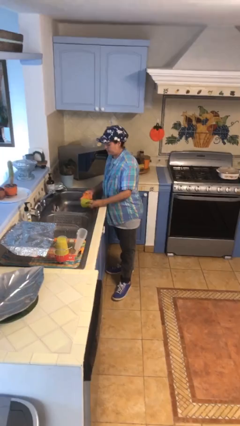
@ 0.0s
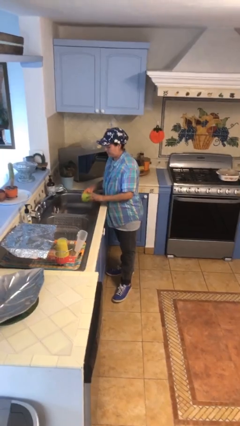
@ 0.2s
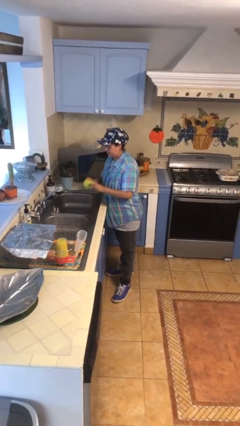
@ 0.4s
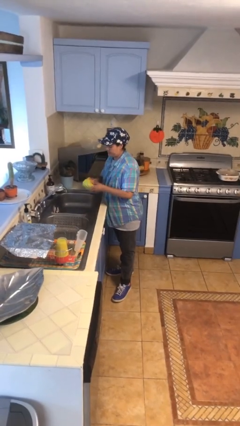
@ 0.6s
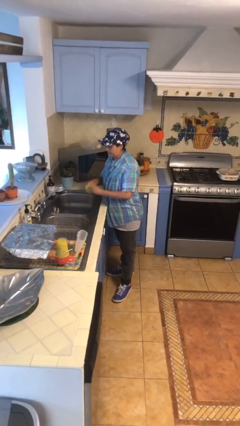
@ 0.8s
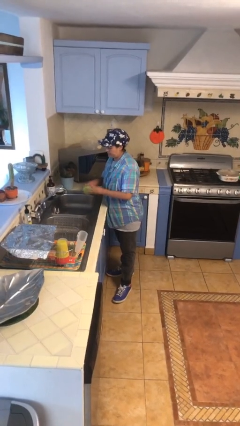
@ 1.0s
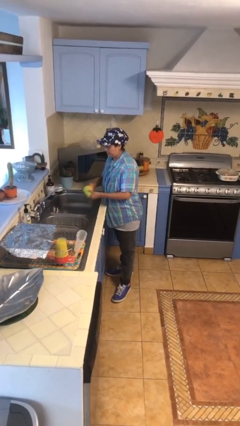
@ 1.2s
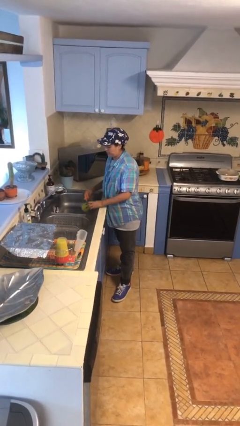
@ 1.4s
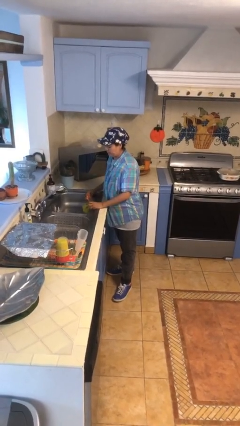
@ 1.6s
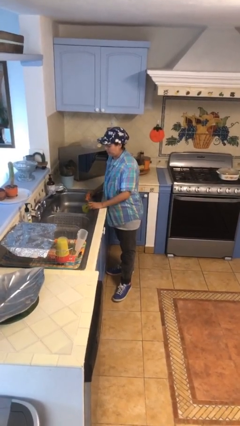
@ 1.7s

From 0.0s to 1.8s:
person washes dish

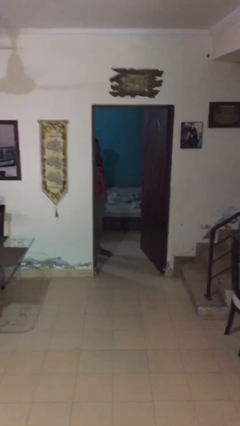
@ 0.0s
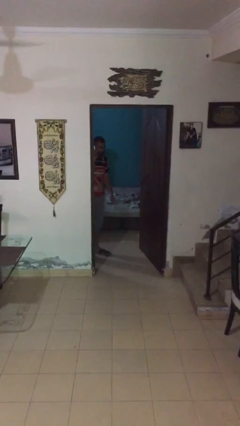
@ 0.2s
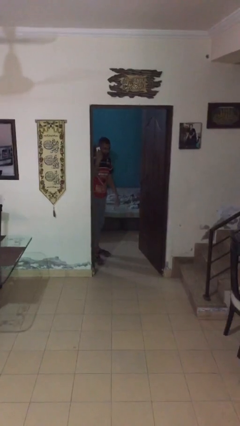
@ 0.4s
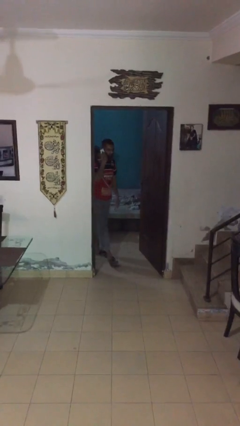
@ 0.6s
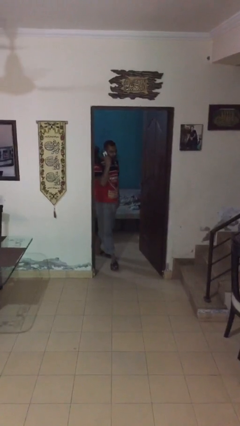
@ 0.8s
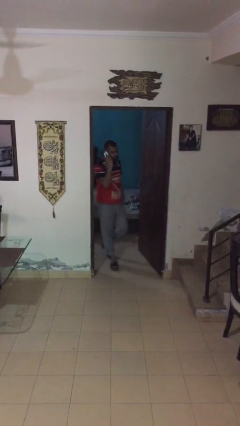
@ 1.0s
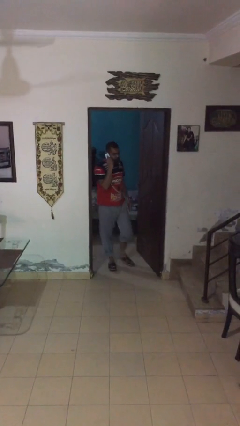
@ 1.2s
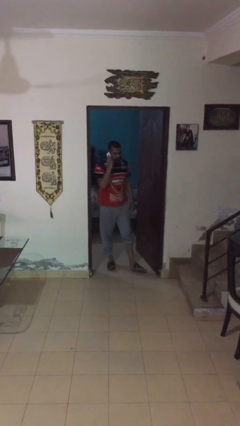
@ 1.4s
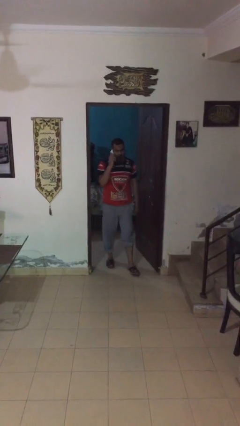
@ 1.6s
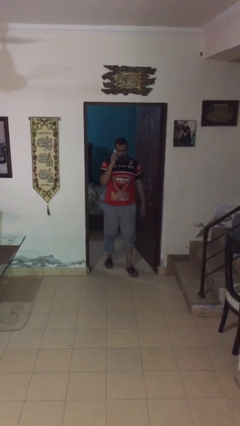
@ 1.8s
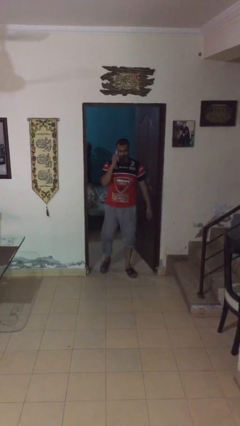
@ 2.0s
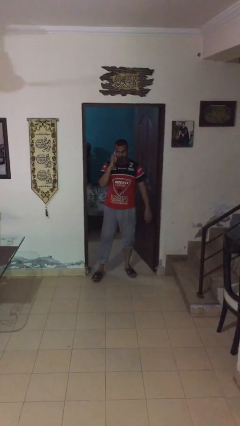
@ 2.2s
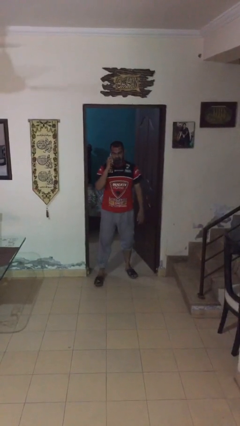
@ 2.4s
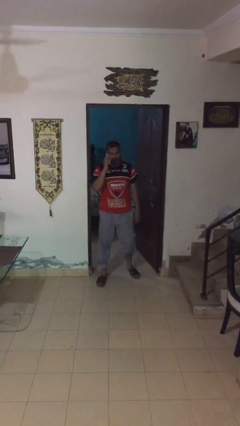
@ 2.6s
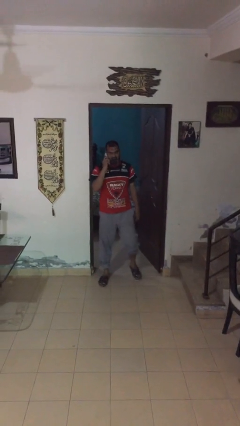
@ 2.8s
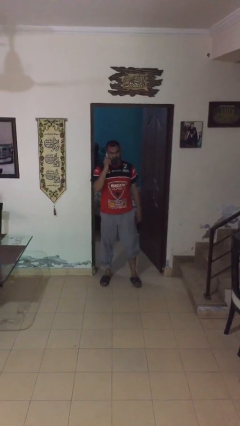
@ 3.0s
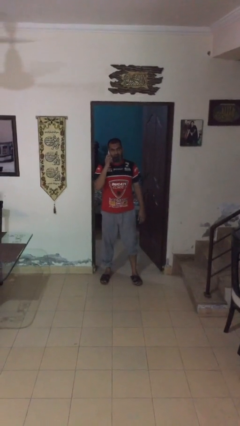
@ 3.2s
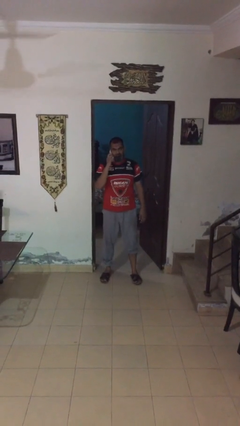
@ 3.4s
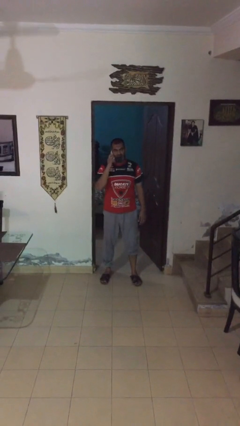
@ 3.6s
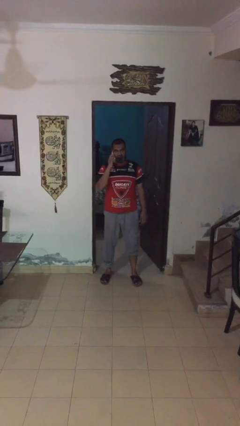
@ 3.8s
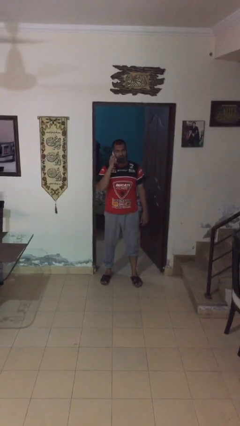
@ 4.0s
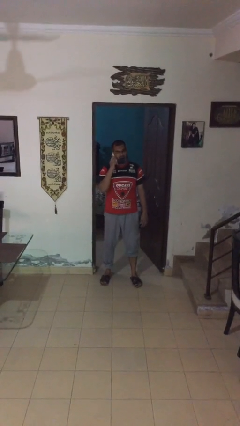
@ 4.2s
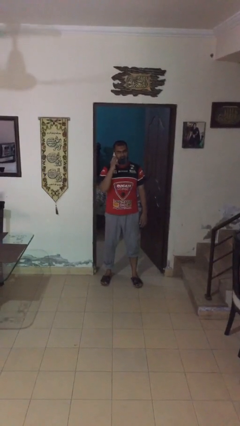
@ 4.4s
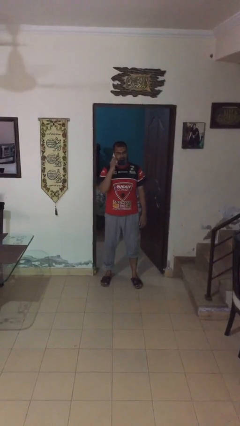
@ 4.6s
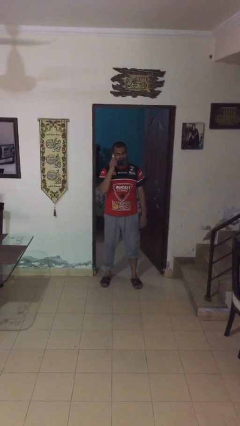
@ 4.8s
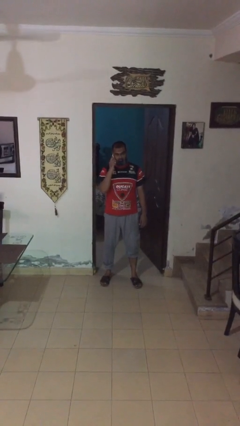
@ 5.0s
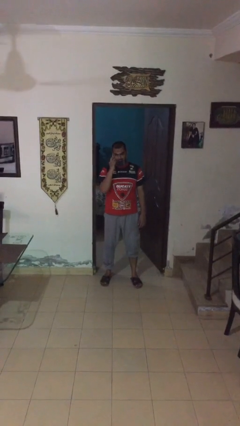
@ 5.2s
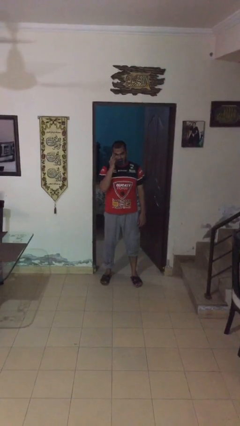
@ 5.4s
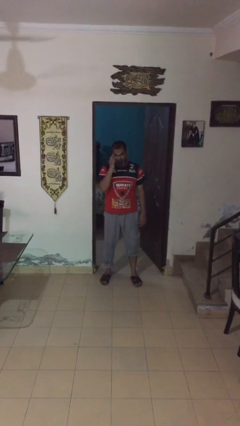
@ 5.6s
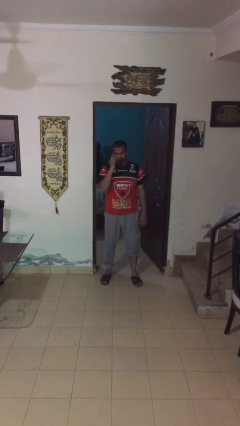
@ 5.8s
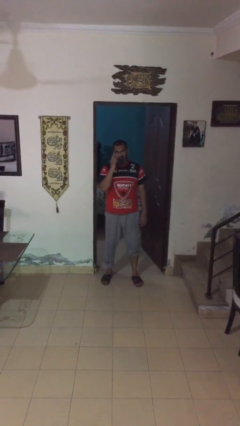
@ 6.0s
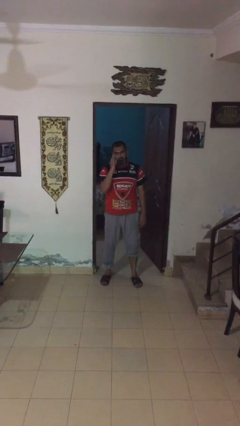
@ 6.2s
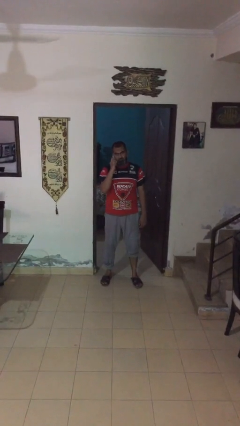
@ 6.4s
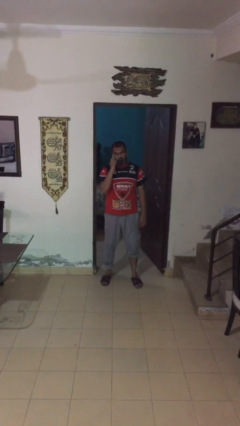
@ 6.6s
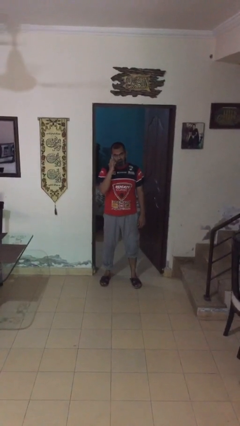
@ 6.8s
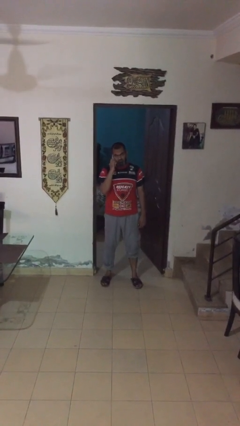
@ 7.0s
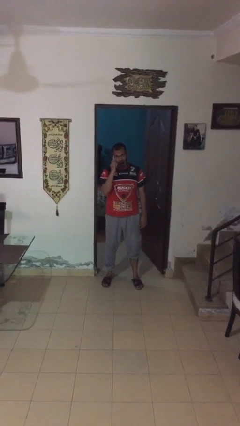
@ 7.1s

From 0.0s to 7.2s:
person enters scene through structure

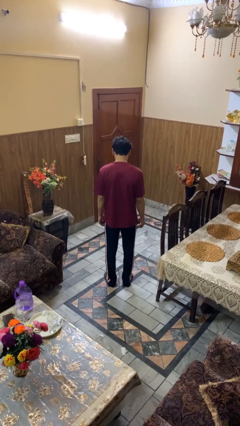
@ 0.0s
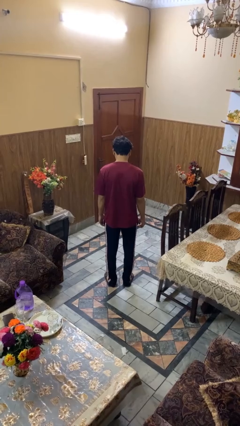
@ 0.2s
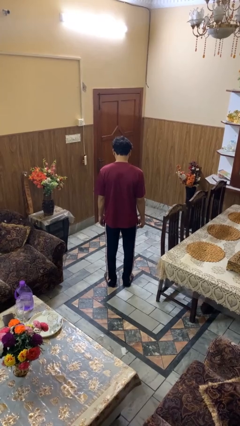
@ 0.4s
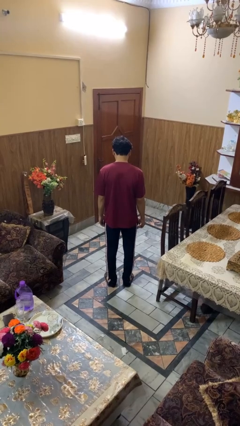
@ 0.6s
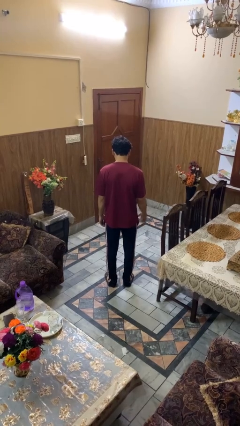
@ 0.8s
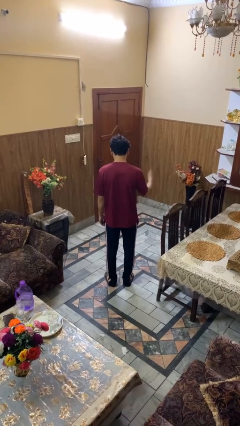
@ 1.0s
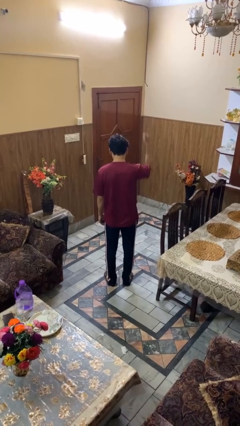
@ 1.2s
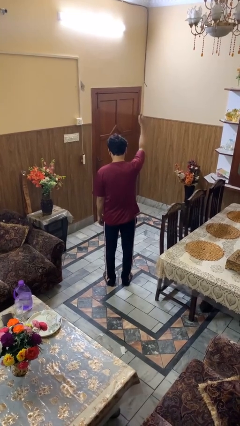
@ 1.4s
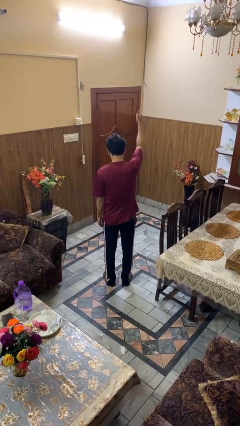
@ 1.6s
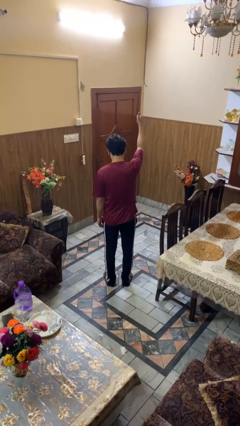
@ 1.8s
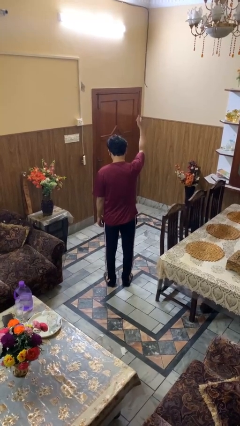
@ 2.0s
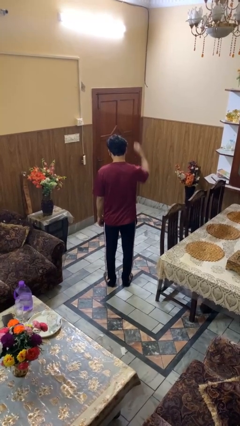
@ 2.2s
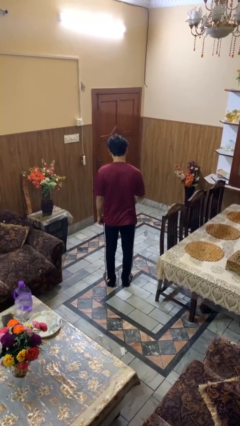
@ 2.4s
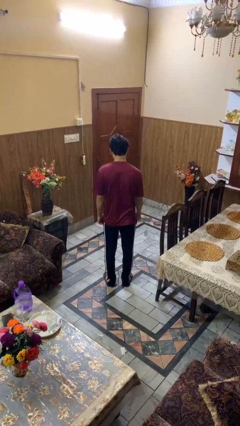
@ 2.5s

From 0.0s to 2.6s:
person gestures thumbs up

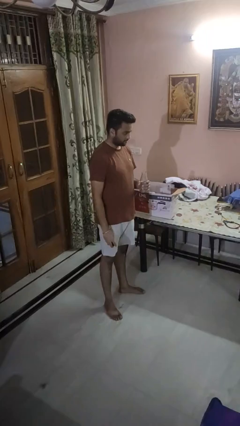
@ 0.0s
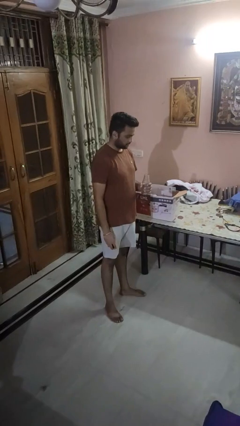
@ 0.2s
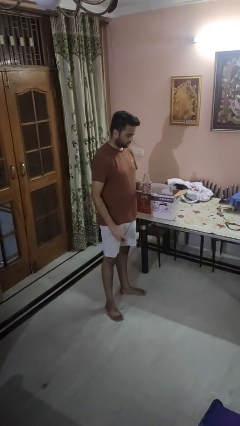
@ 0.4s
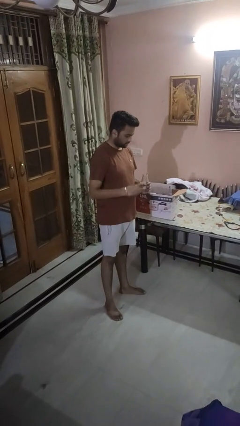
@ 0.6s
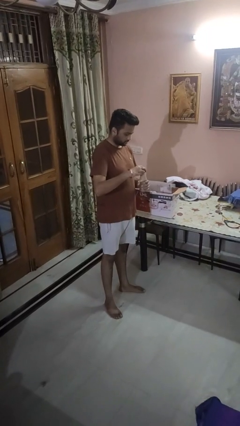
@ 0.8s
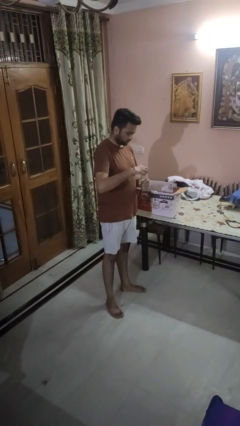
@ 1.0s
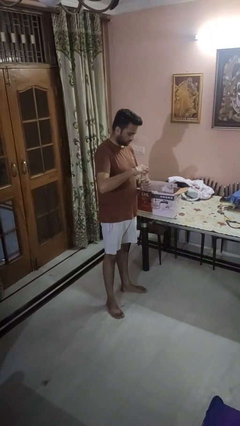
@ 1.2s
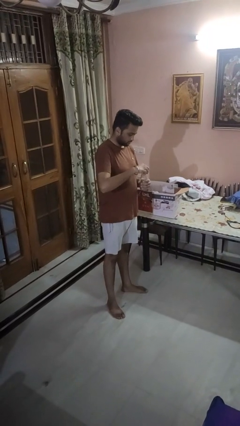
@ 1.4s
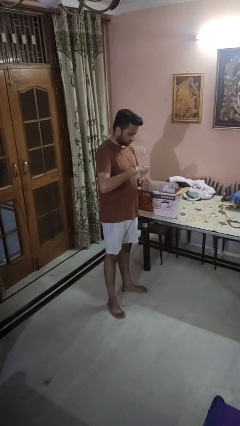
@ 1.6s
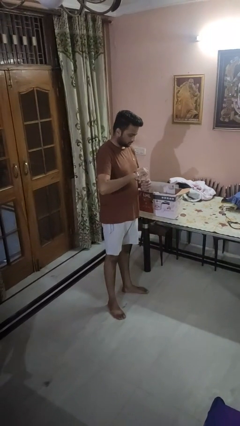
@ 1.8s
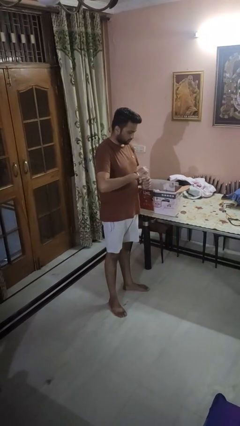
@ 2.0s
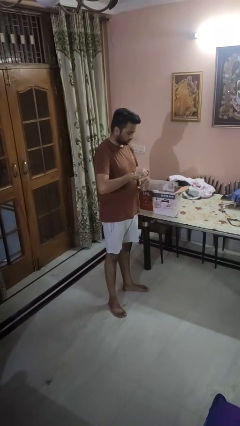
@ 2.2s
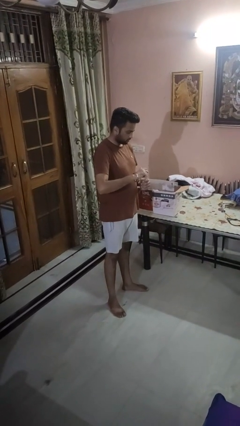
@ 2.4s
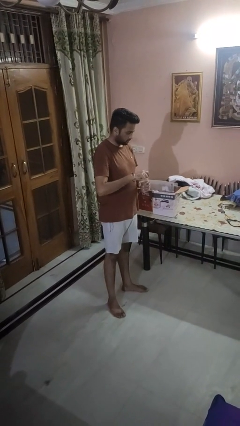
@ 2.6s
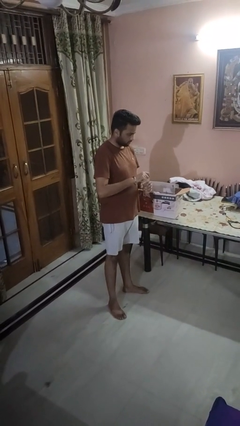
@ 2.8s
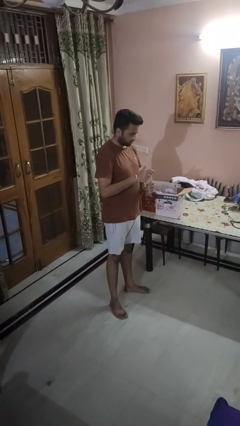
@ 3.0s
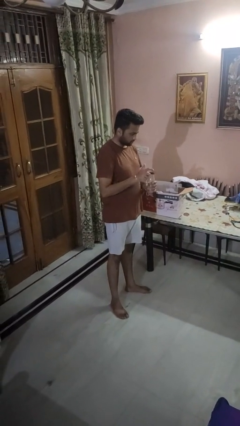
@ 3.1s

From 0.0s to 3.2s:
person screws lid to bottle

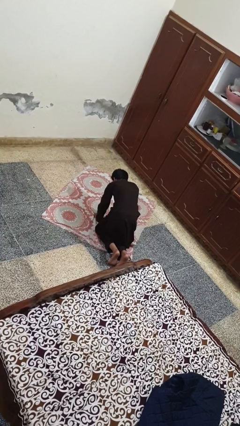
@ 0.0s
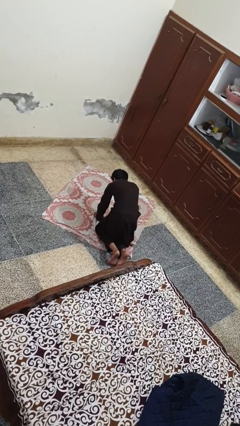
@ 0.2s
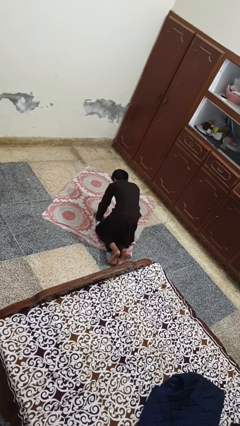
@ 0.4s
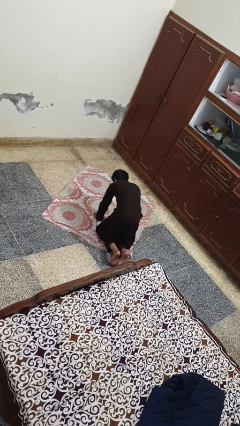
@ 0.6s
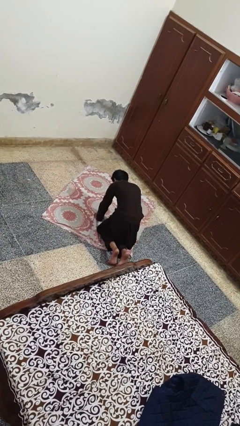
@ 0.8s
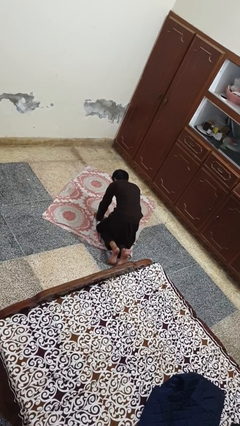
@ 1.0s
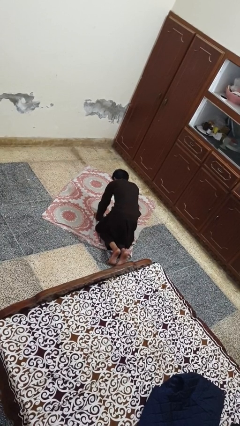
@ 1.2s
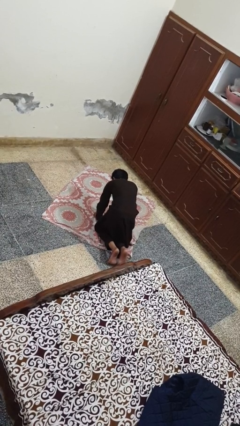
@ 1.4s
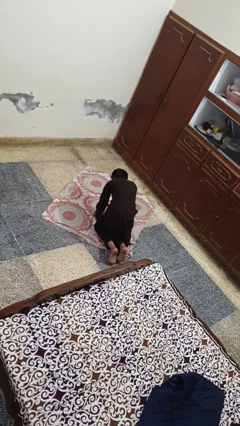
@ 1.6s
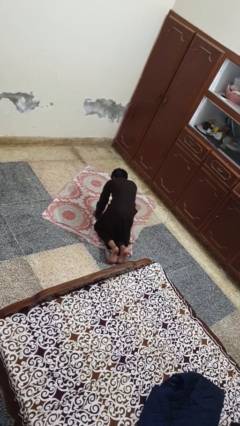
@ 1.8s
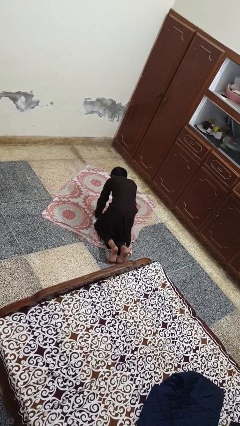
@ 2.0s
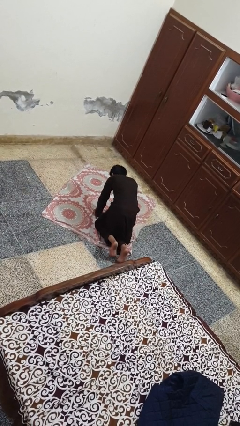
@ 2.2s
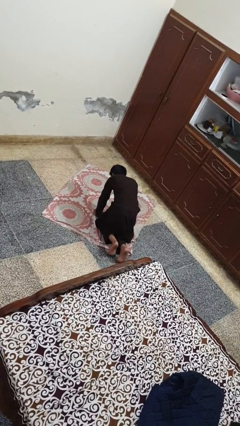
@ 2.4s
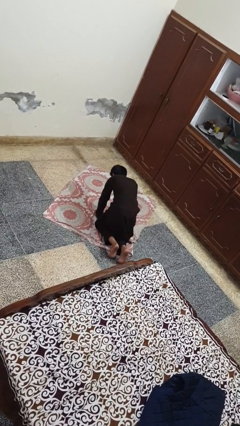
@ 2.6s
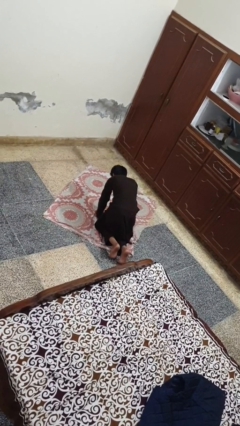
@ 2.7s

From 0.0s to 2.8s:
person crawls
